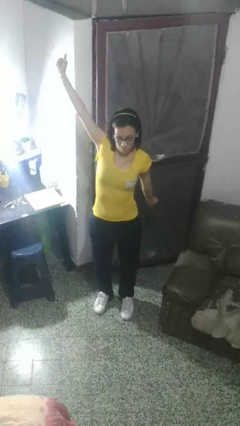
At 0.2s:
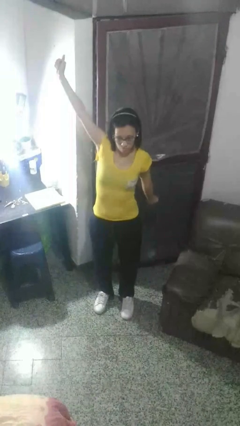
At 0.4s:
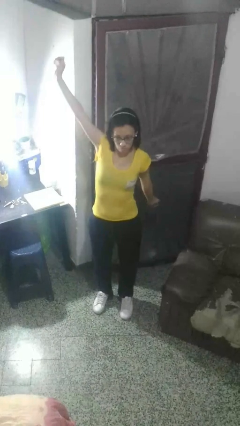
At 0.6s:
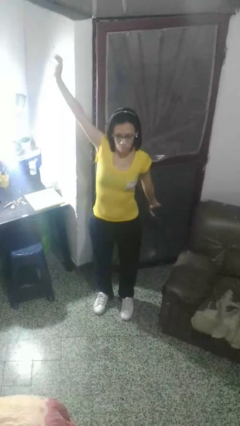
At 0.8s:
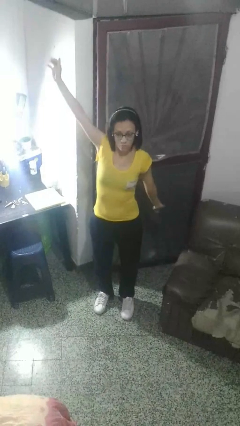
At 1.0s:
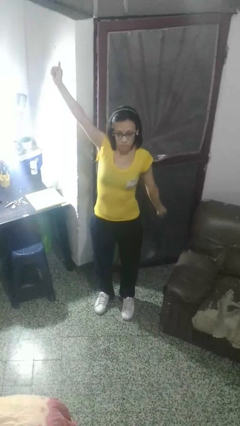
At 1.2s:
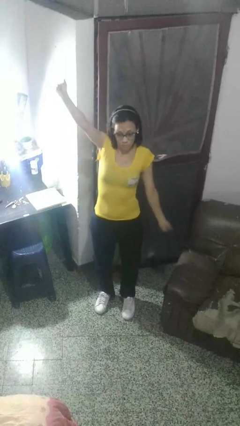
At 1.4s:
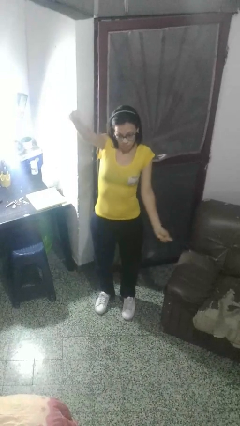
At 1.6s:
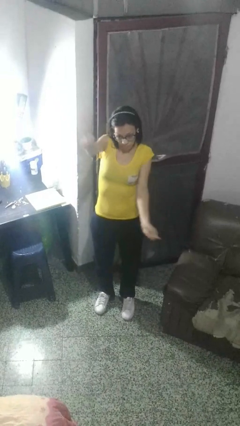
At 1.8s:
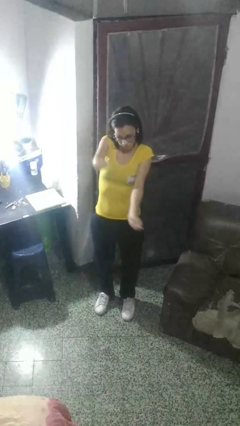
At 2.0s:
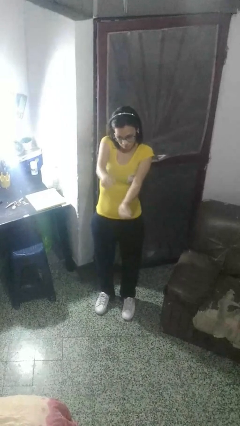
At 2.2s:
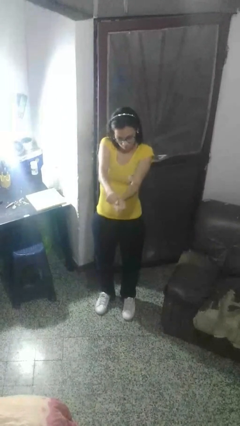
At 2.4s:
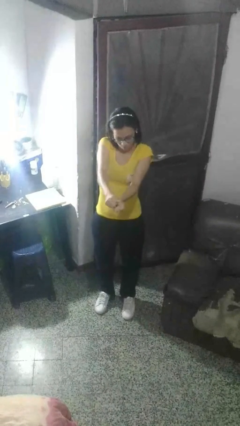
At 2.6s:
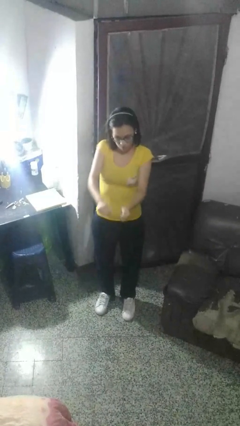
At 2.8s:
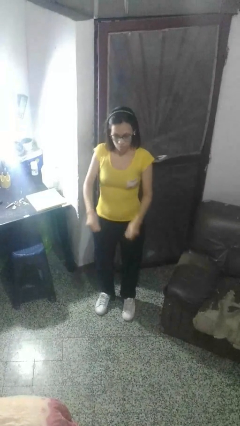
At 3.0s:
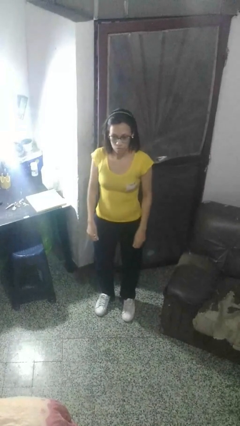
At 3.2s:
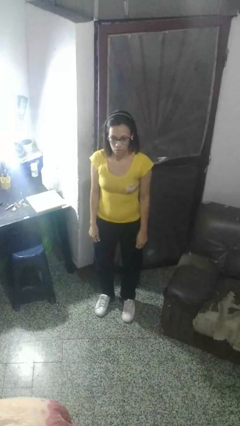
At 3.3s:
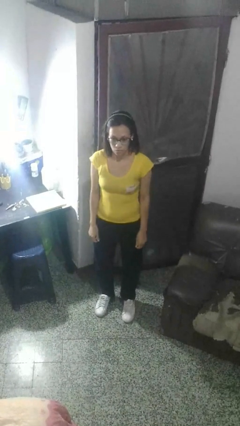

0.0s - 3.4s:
person gestures zoom out

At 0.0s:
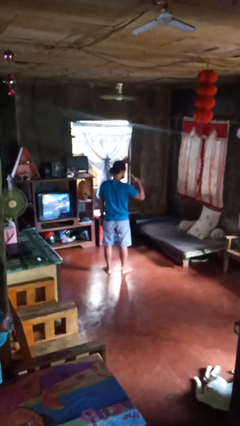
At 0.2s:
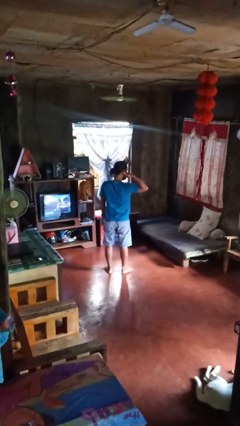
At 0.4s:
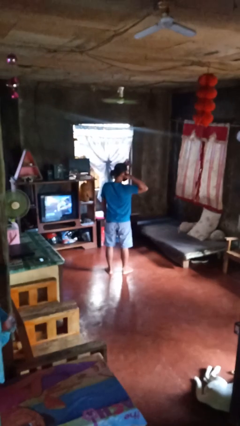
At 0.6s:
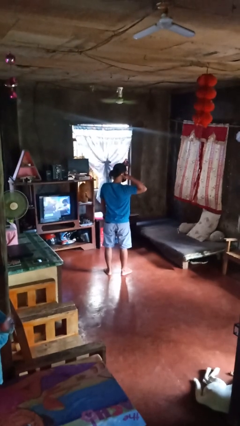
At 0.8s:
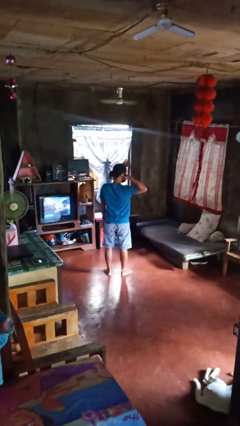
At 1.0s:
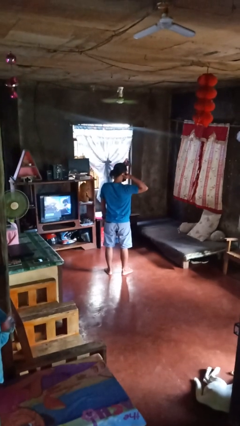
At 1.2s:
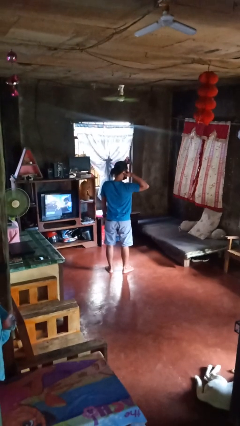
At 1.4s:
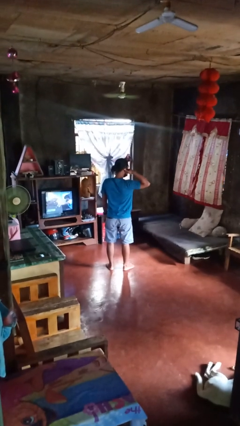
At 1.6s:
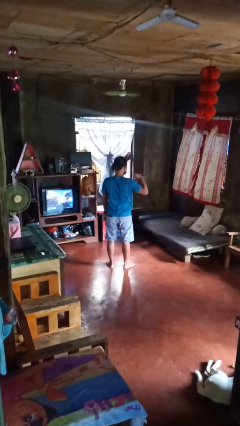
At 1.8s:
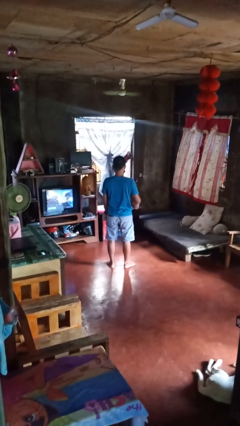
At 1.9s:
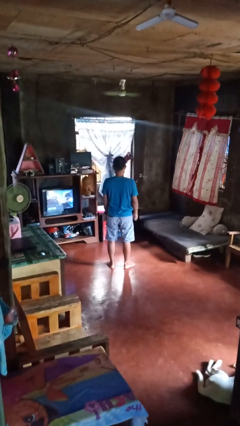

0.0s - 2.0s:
person gestures call me

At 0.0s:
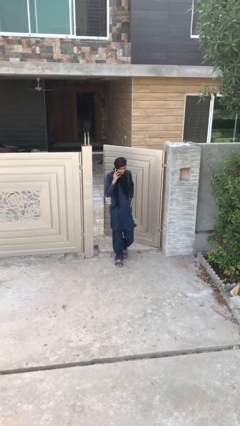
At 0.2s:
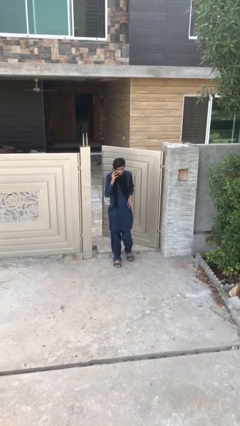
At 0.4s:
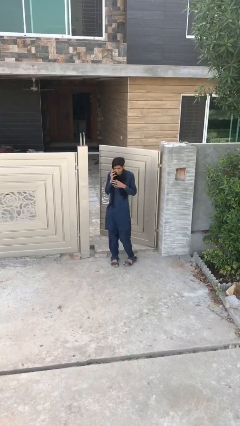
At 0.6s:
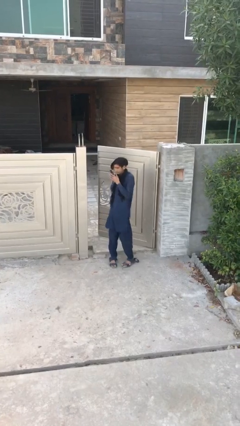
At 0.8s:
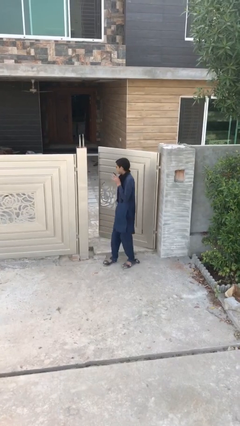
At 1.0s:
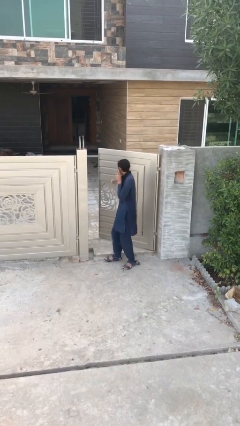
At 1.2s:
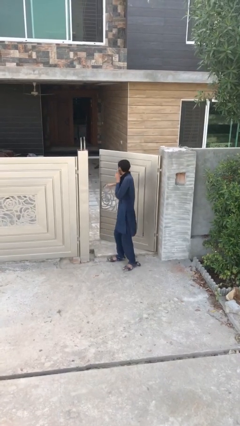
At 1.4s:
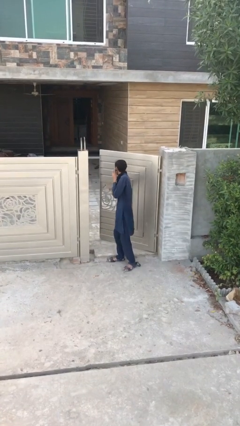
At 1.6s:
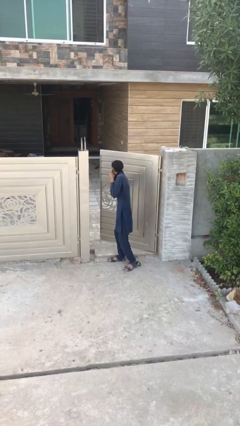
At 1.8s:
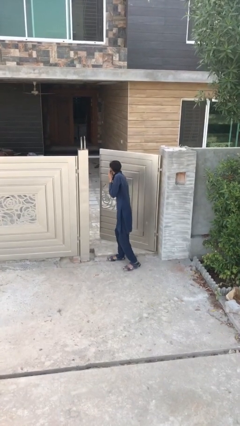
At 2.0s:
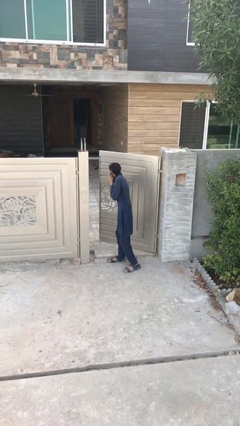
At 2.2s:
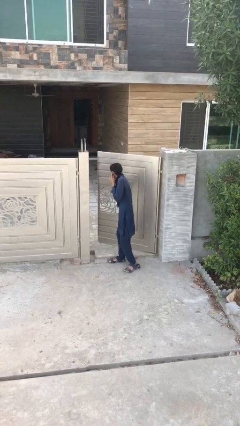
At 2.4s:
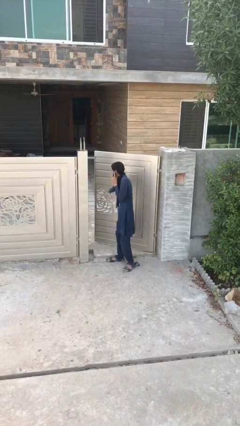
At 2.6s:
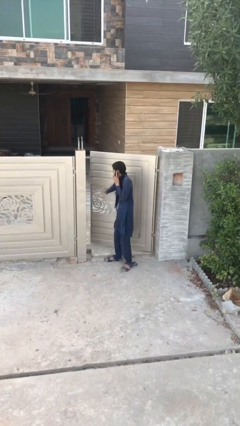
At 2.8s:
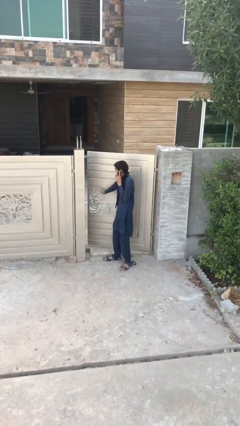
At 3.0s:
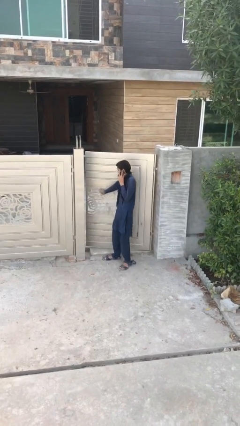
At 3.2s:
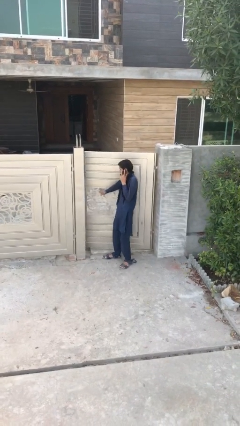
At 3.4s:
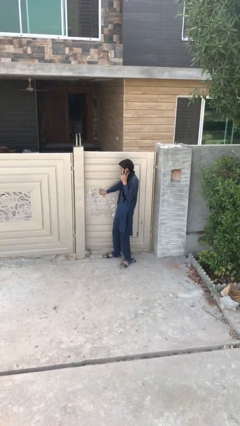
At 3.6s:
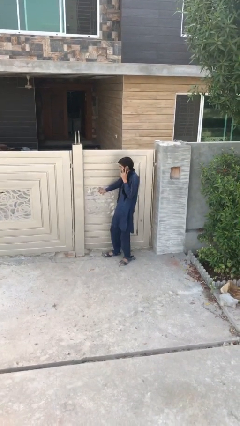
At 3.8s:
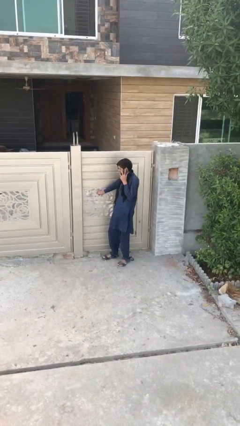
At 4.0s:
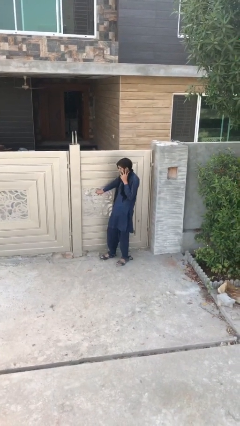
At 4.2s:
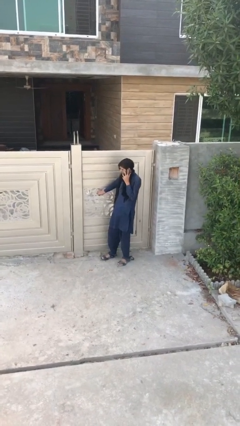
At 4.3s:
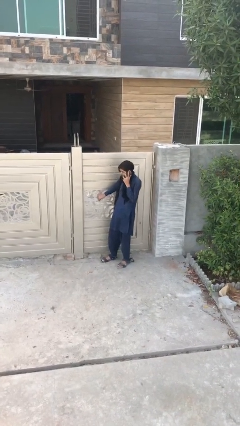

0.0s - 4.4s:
person closes facility door

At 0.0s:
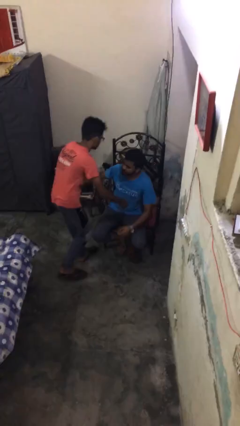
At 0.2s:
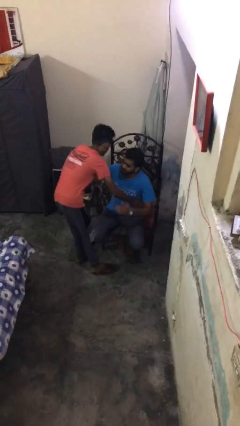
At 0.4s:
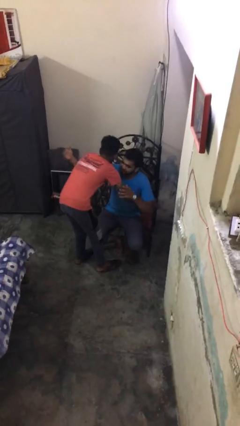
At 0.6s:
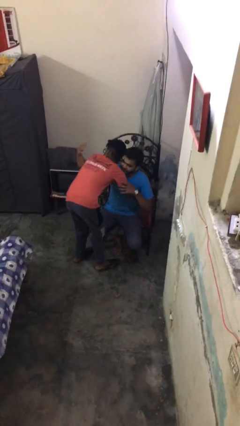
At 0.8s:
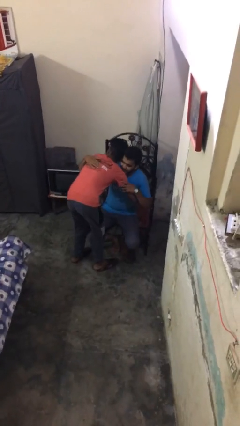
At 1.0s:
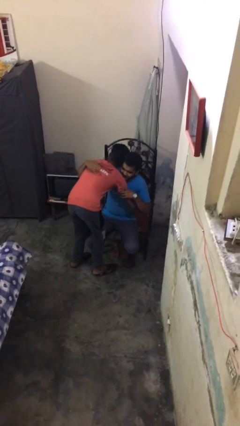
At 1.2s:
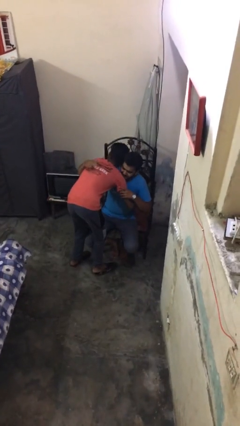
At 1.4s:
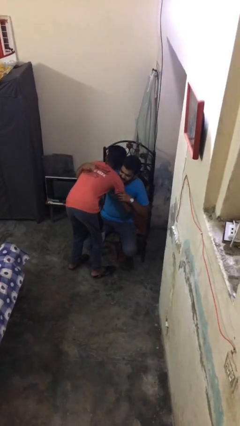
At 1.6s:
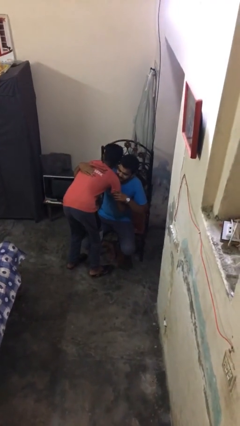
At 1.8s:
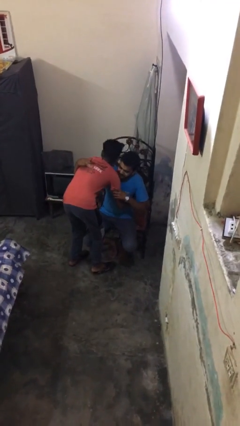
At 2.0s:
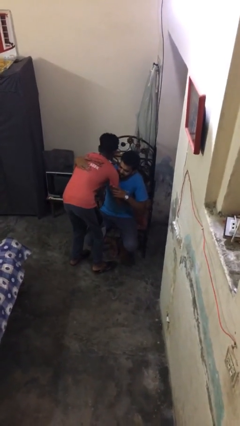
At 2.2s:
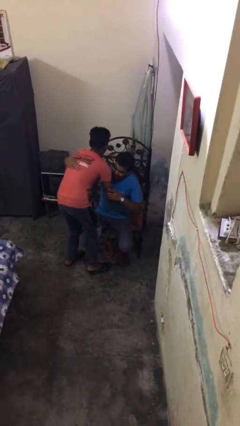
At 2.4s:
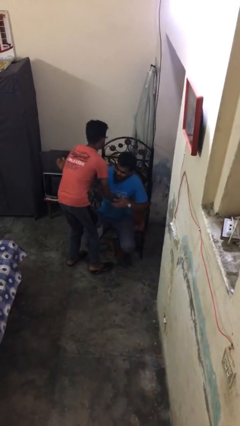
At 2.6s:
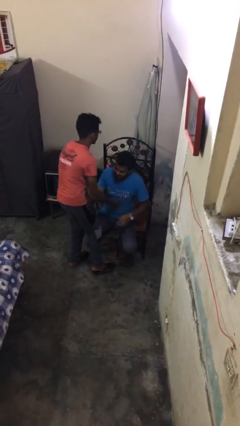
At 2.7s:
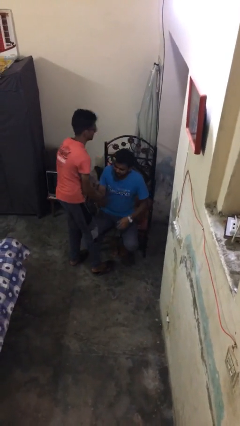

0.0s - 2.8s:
person embraces person

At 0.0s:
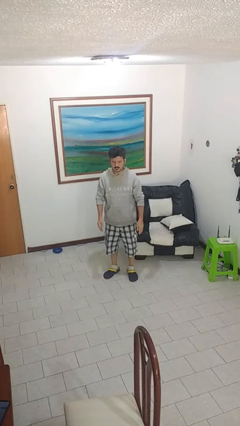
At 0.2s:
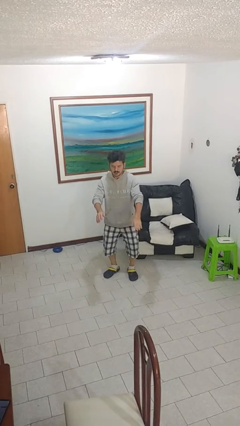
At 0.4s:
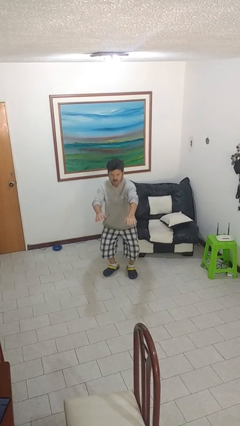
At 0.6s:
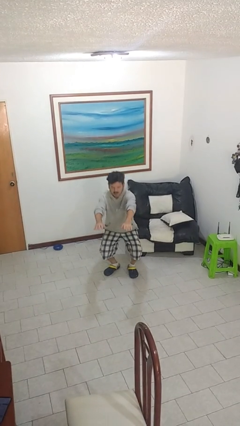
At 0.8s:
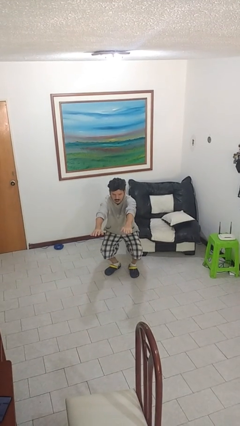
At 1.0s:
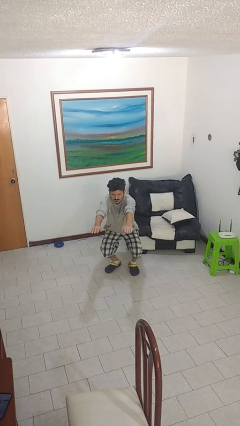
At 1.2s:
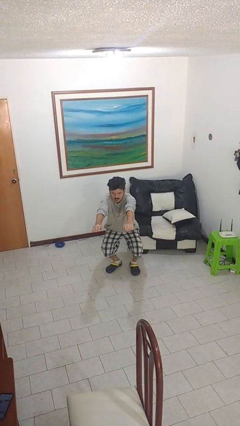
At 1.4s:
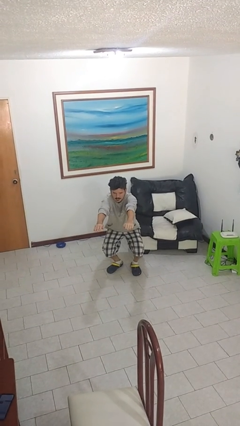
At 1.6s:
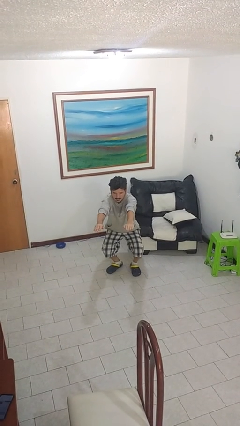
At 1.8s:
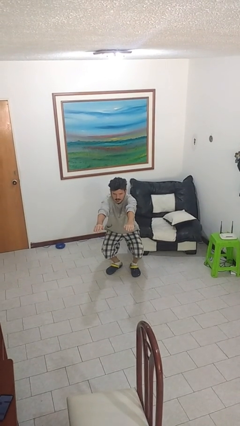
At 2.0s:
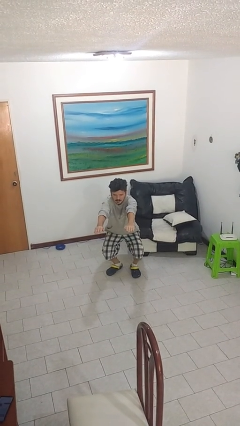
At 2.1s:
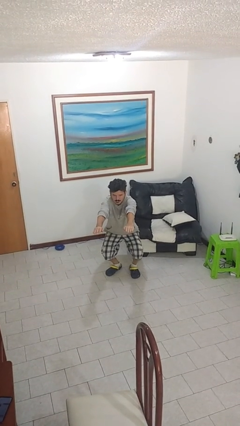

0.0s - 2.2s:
person squats

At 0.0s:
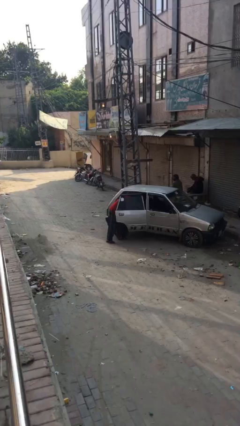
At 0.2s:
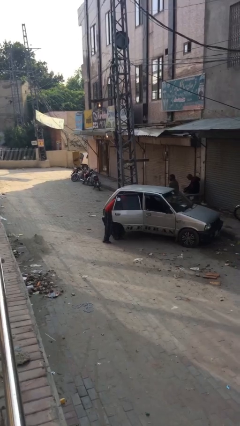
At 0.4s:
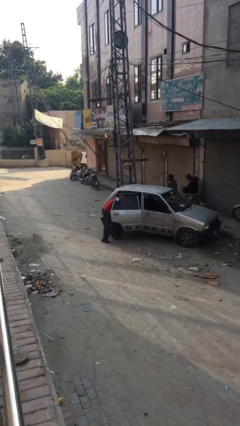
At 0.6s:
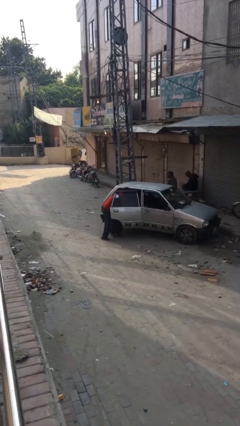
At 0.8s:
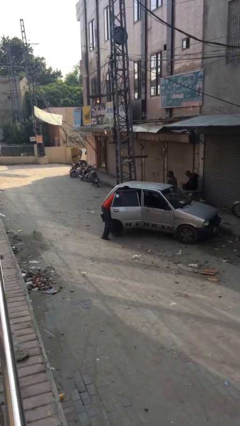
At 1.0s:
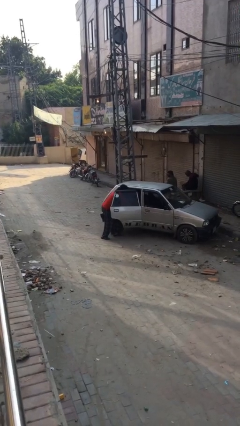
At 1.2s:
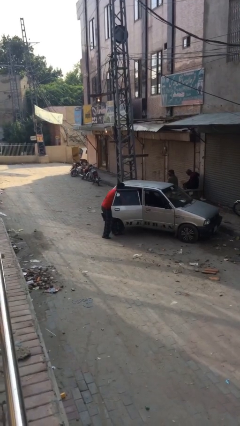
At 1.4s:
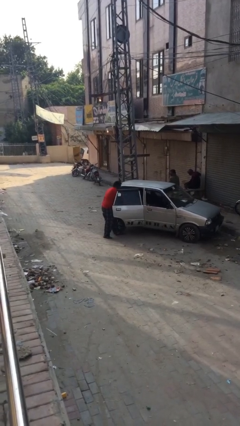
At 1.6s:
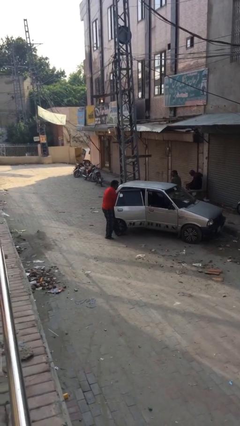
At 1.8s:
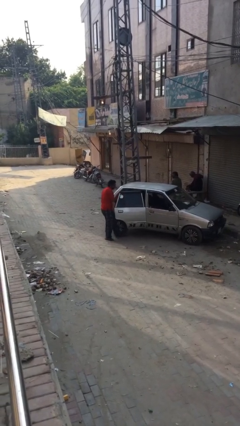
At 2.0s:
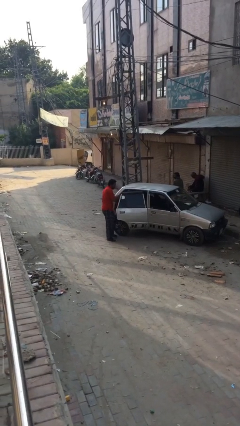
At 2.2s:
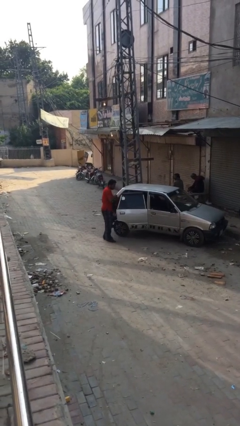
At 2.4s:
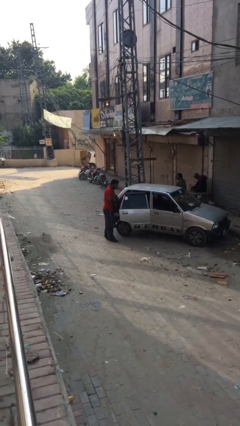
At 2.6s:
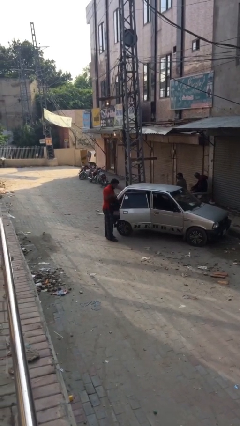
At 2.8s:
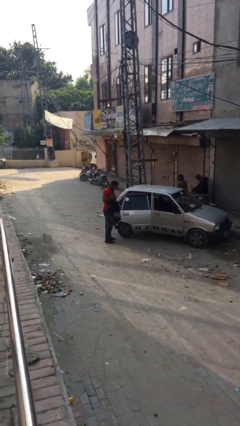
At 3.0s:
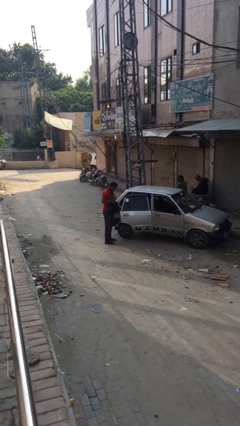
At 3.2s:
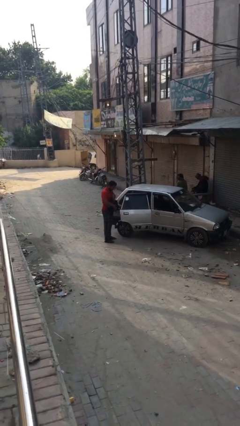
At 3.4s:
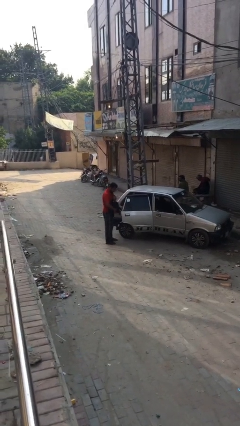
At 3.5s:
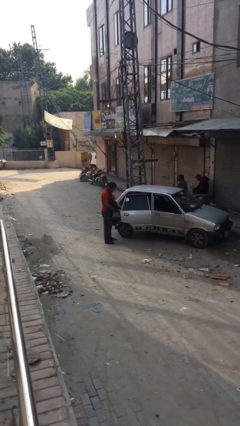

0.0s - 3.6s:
person unloads car
